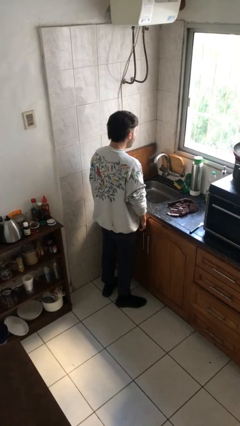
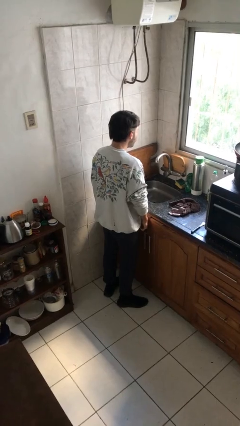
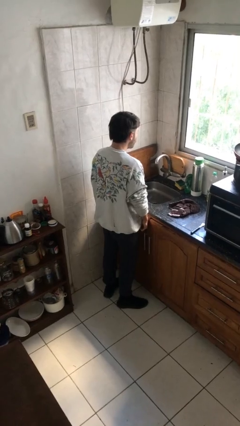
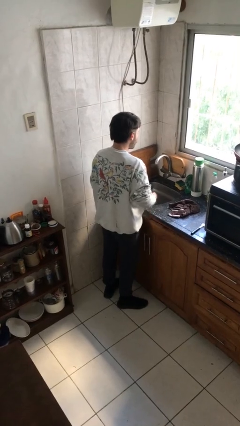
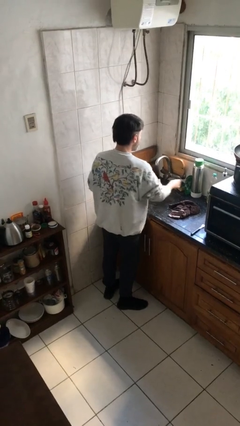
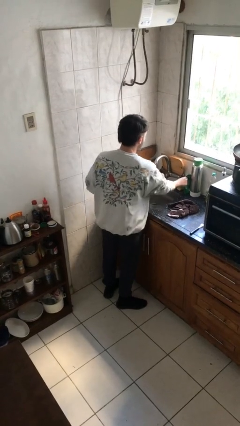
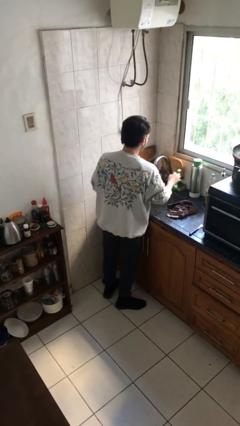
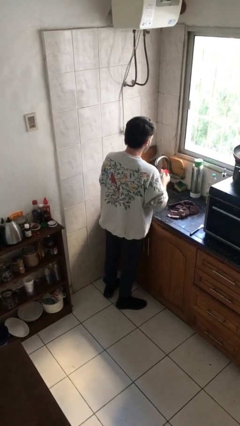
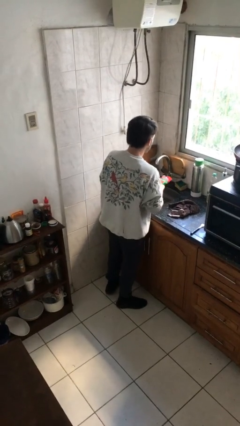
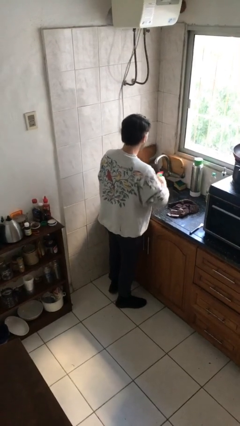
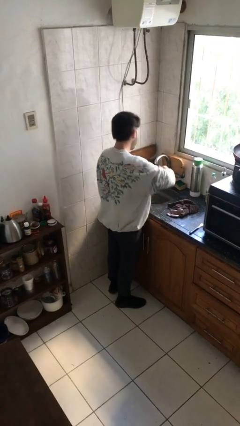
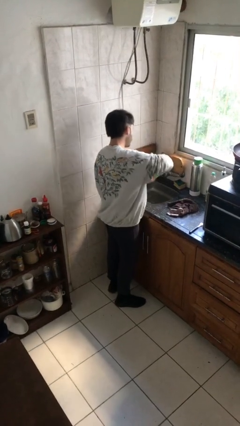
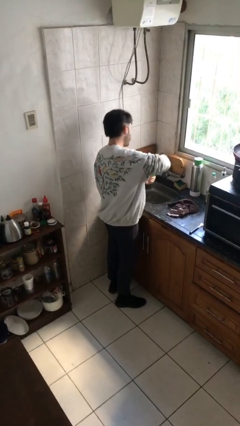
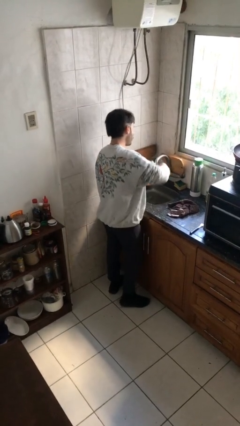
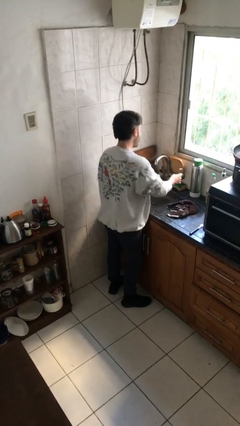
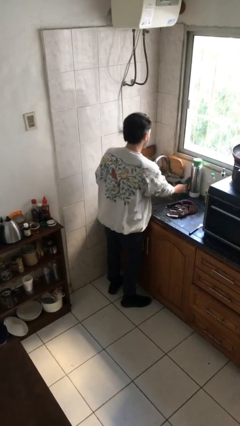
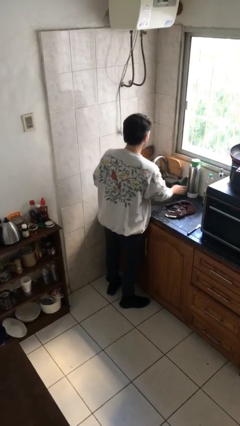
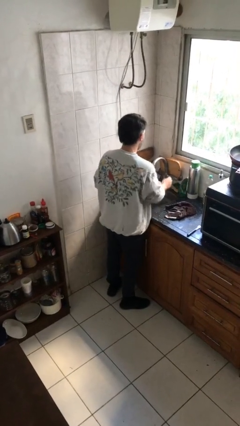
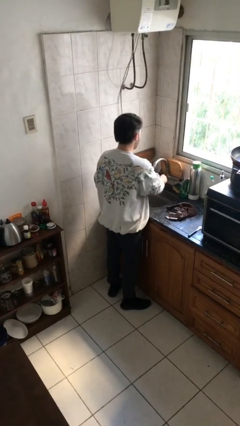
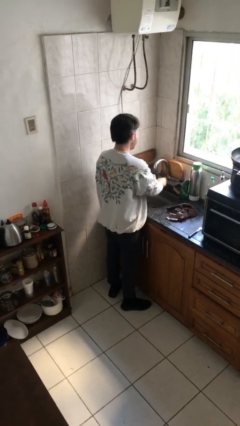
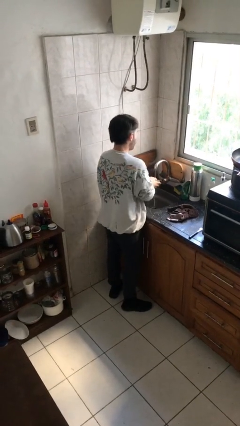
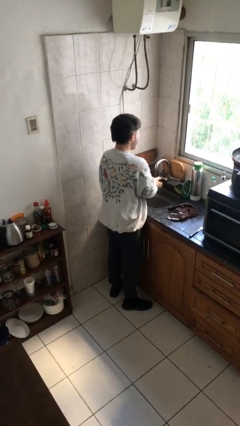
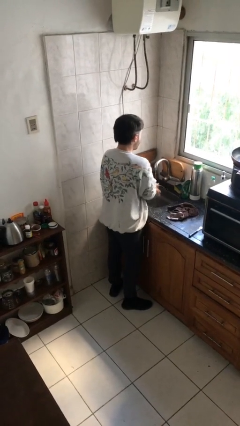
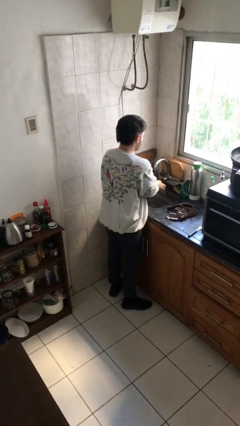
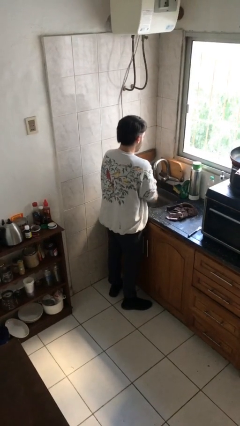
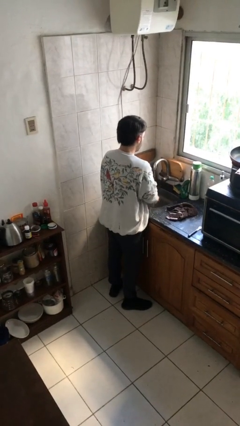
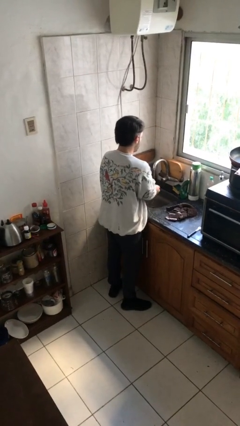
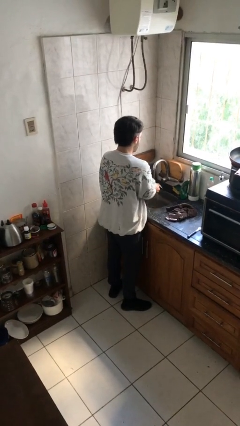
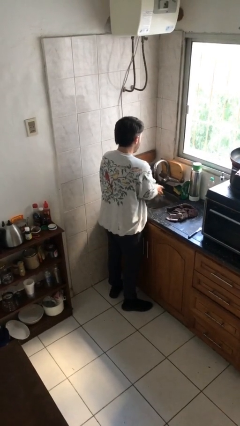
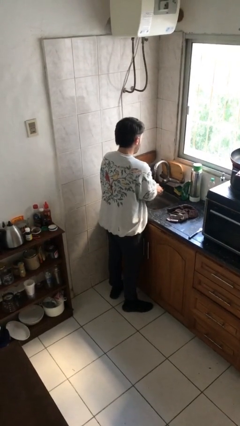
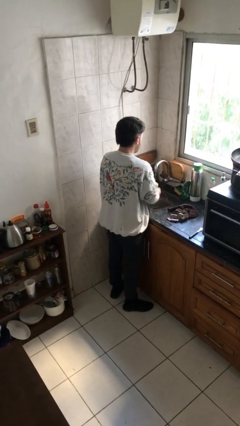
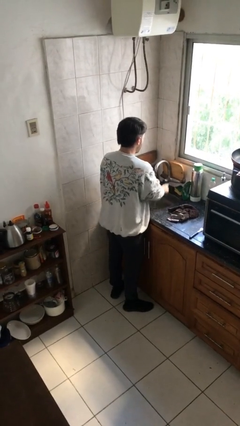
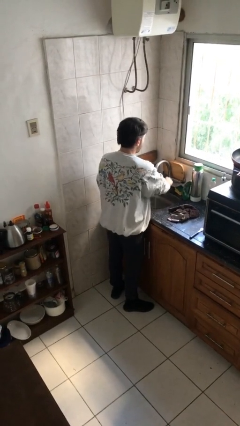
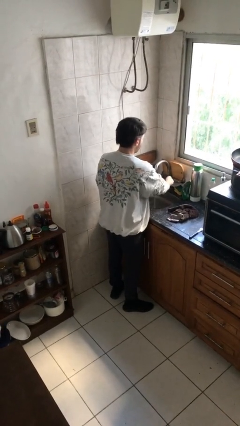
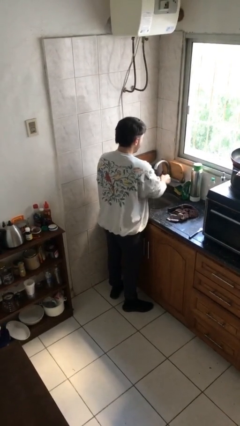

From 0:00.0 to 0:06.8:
person washes hands

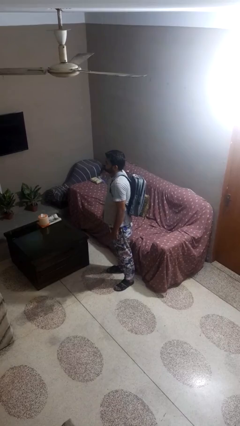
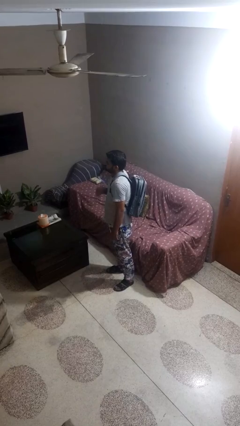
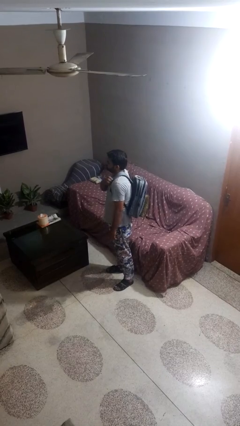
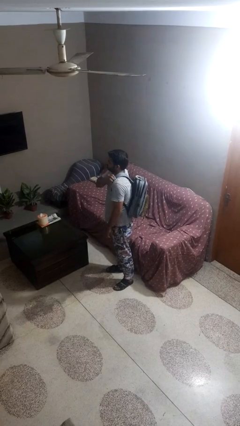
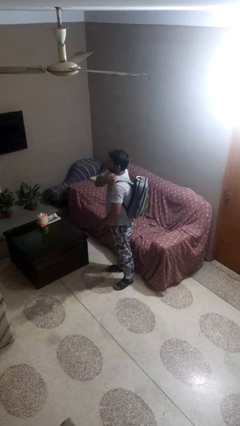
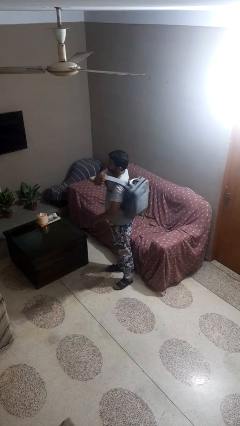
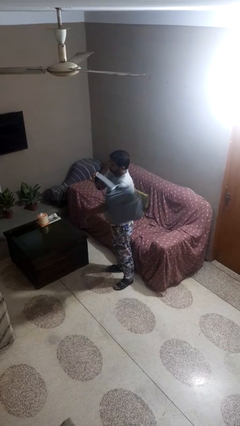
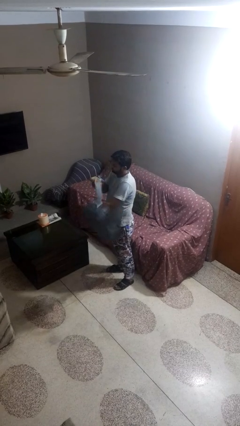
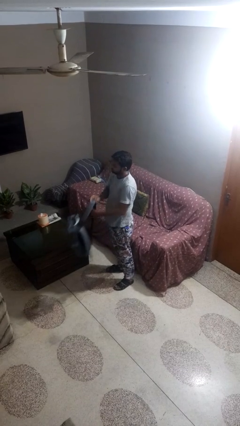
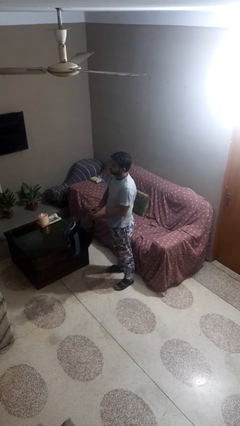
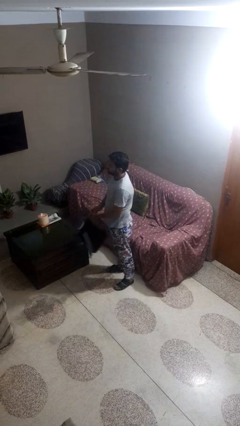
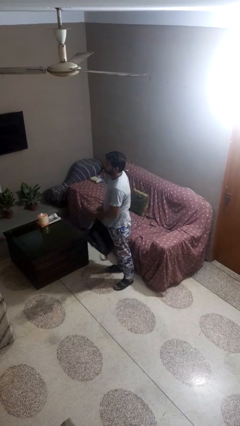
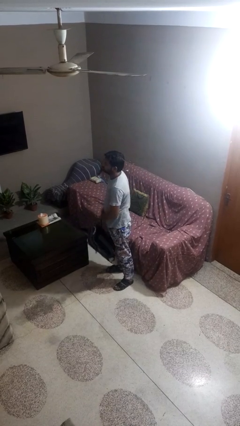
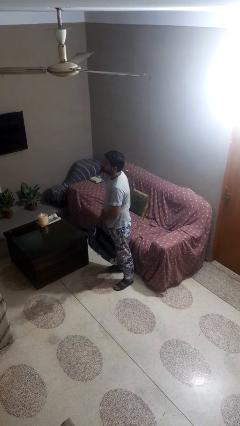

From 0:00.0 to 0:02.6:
person takes off backpack

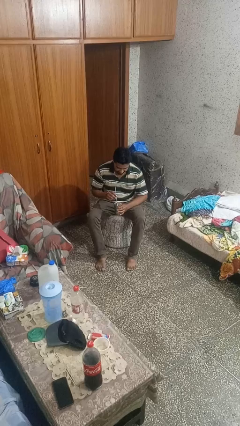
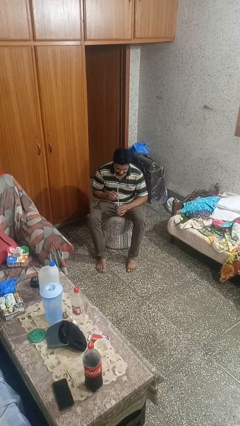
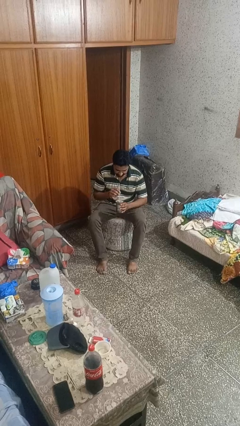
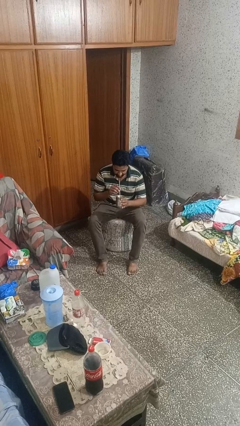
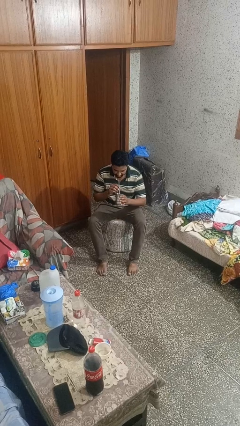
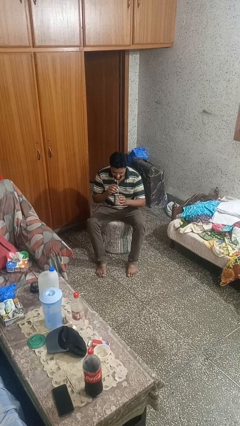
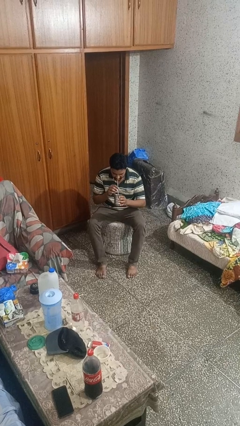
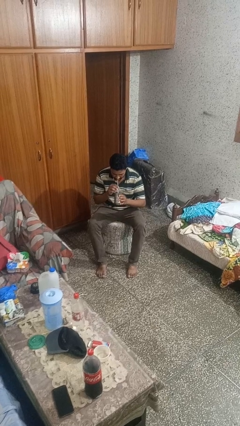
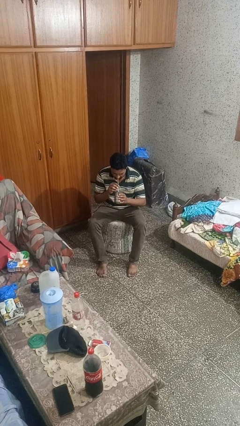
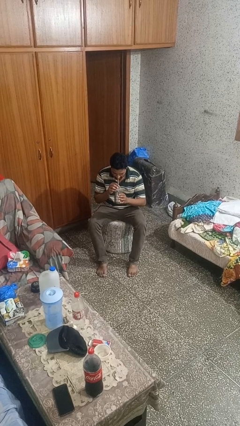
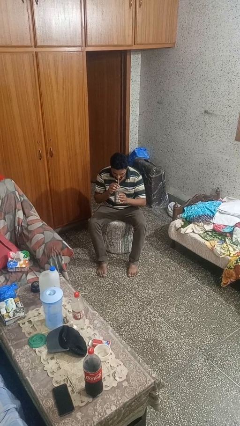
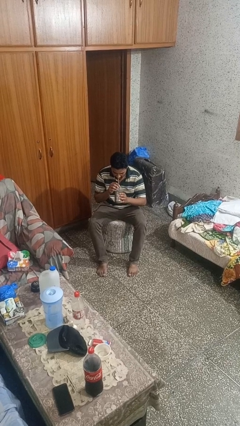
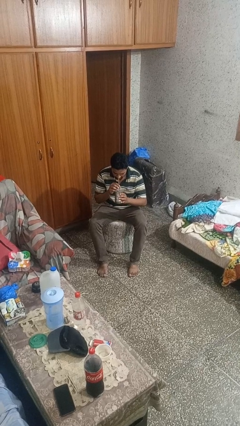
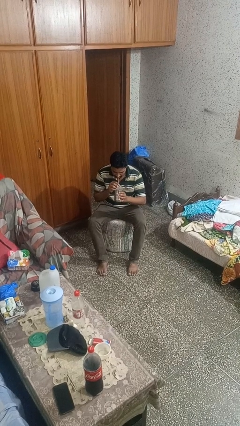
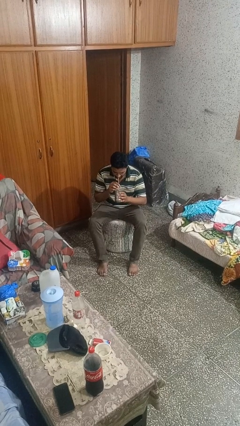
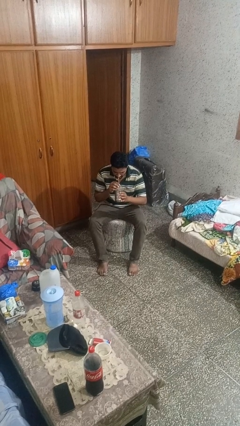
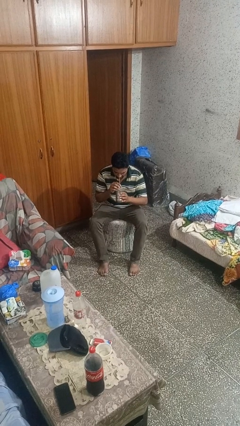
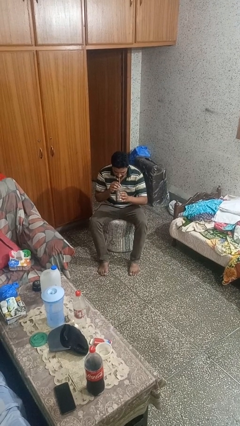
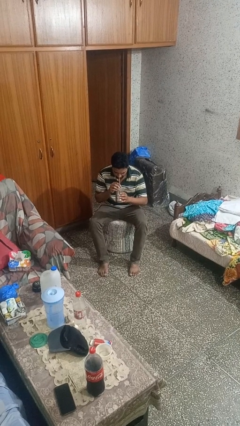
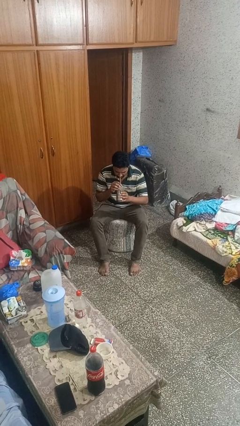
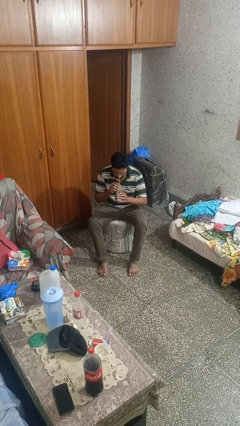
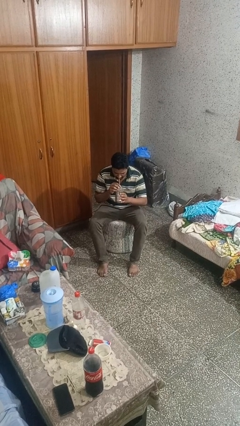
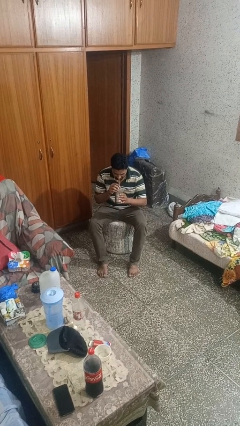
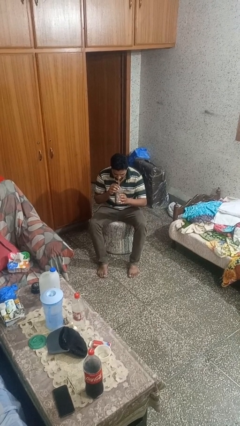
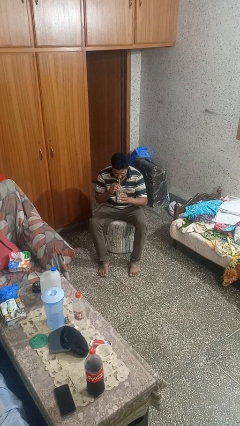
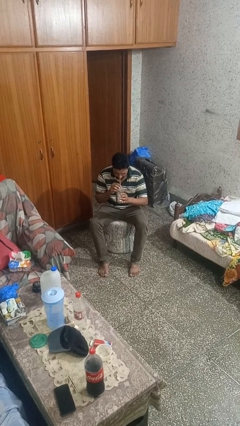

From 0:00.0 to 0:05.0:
person drinks from straw

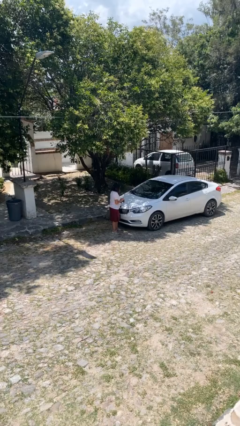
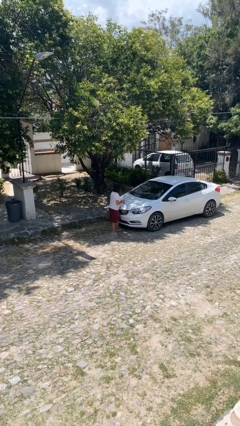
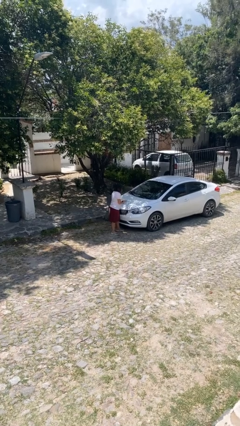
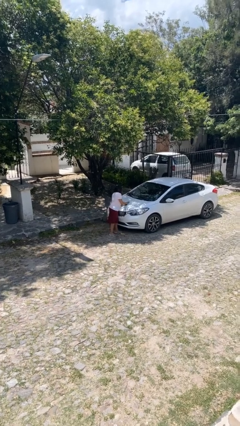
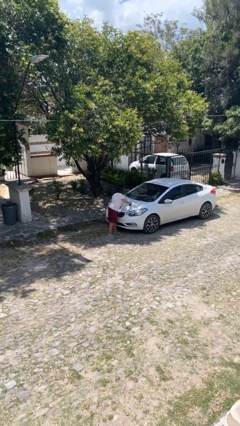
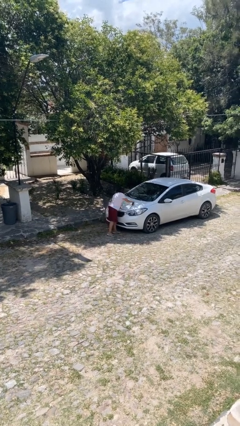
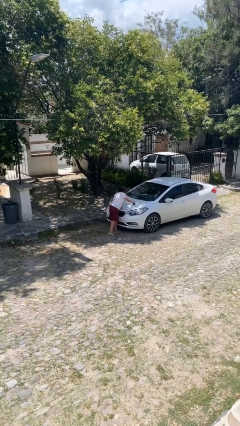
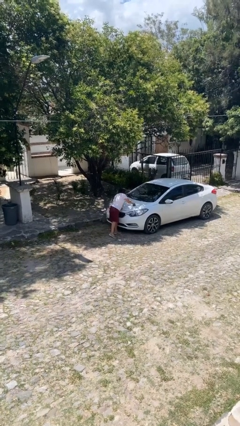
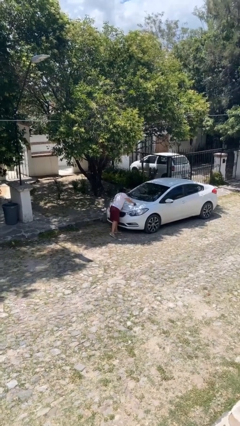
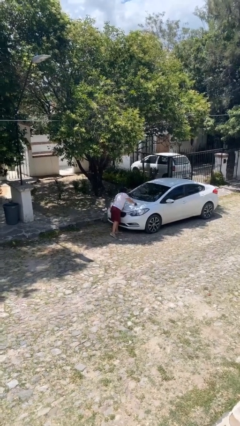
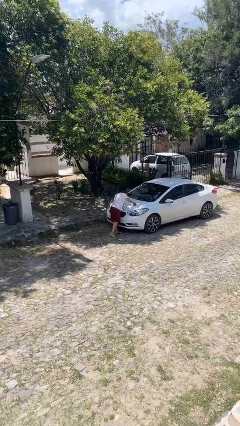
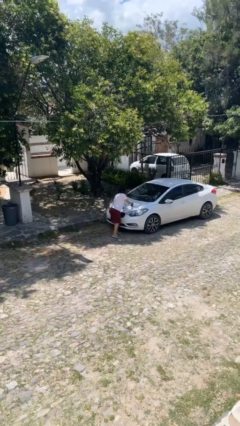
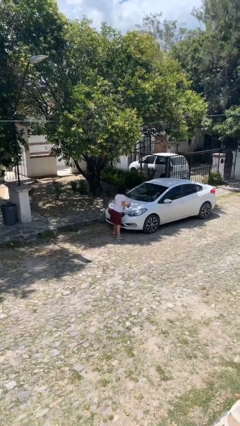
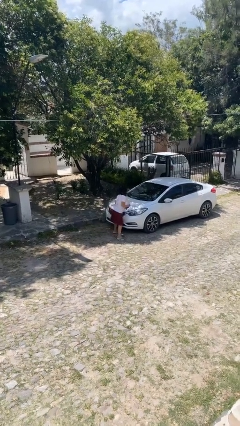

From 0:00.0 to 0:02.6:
person polishes car with rag

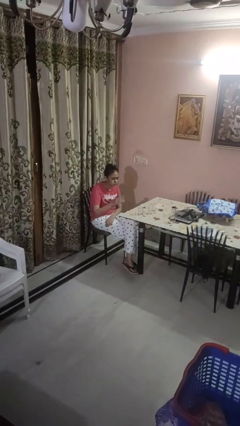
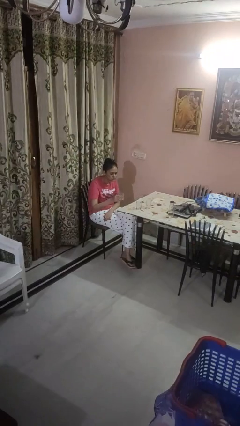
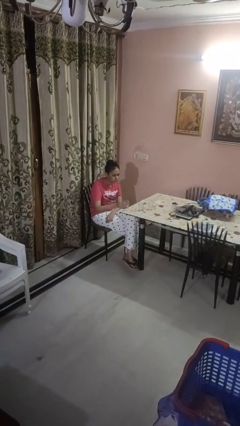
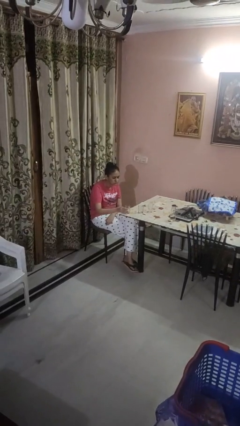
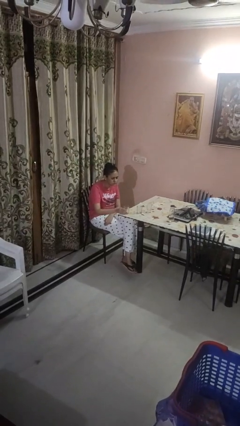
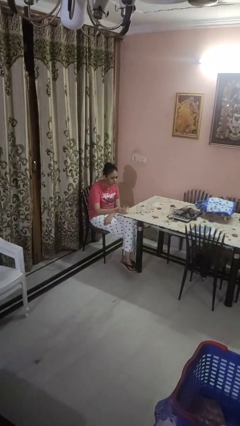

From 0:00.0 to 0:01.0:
person puts down object on table
